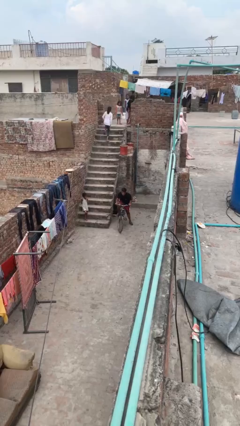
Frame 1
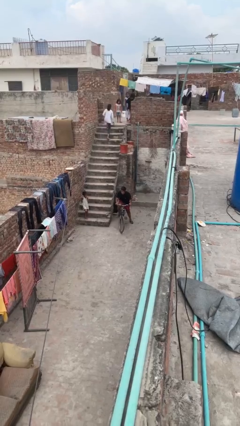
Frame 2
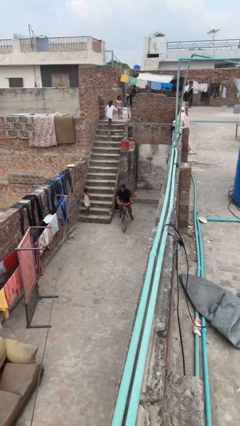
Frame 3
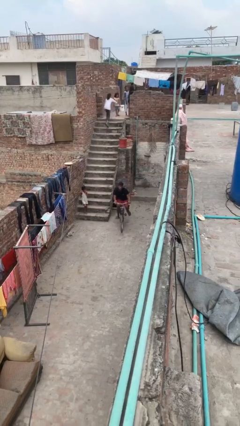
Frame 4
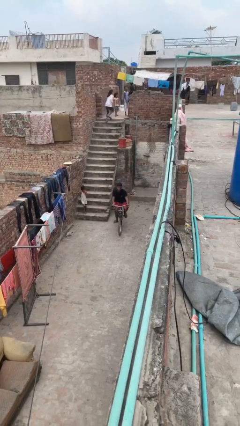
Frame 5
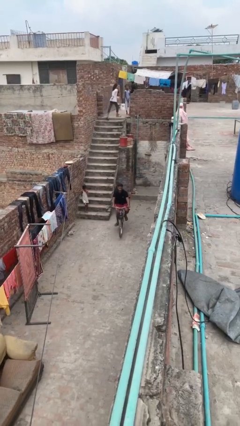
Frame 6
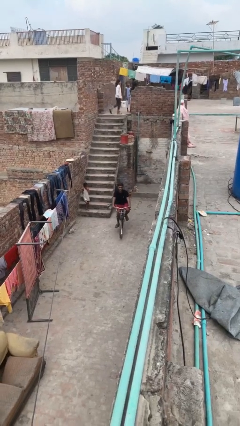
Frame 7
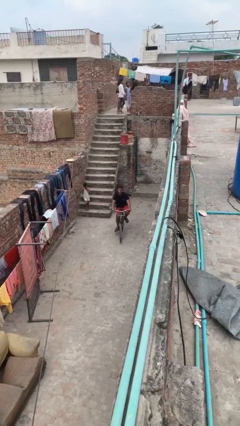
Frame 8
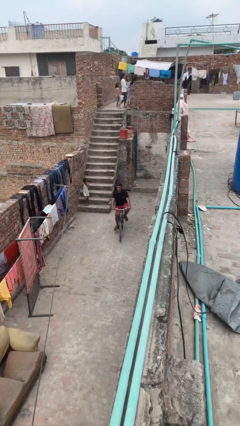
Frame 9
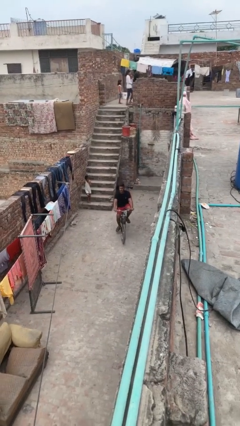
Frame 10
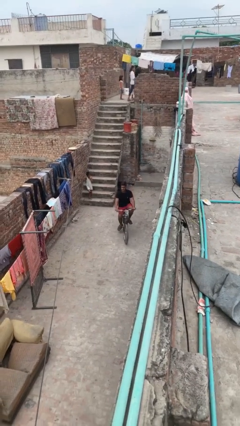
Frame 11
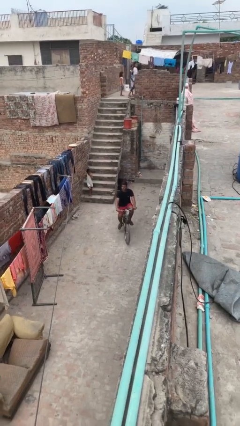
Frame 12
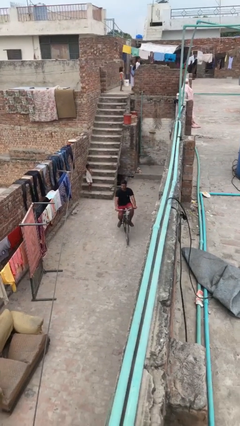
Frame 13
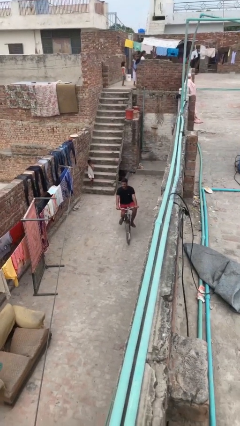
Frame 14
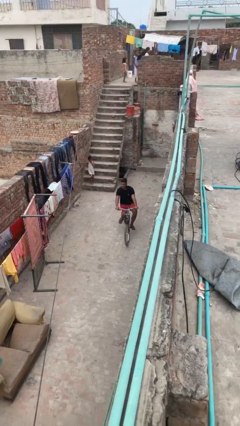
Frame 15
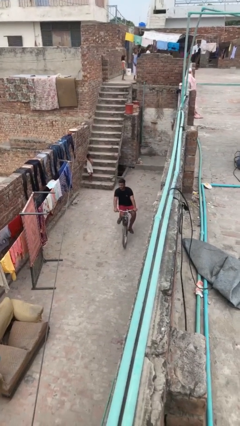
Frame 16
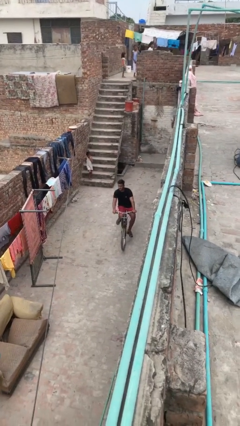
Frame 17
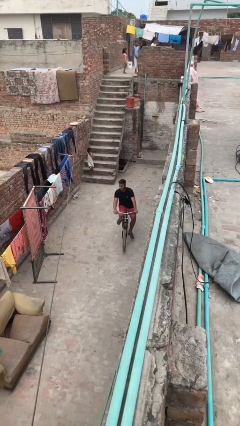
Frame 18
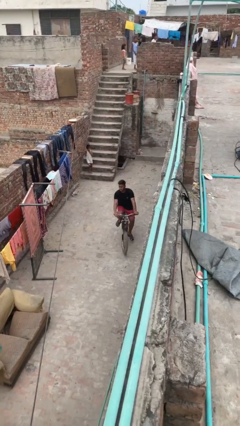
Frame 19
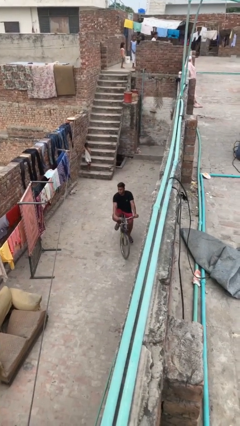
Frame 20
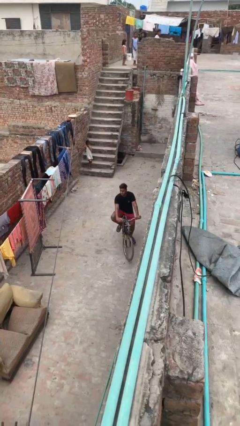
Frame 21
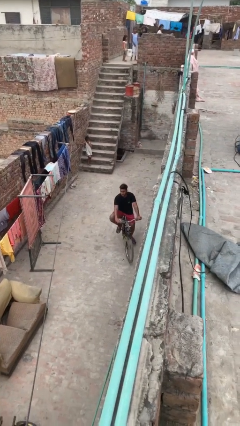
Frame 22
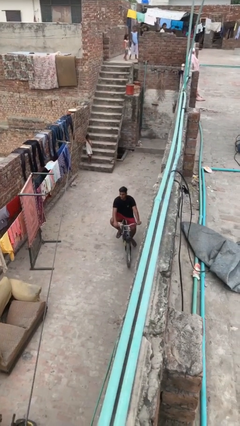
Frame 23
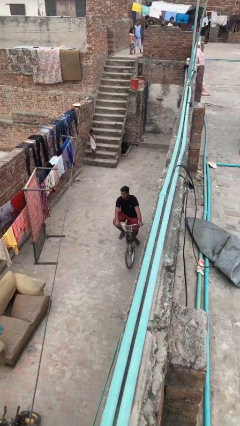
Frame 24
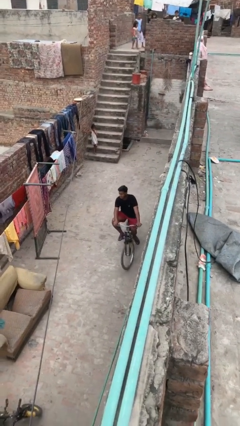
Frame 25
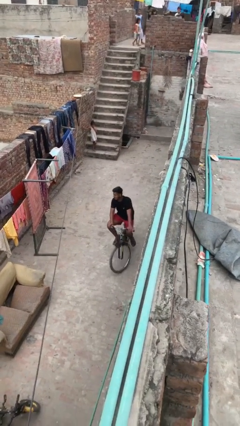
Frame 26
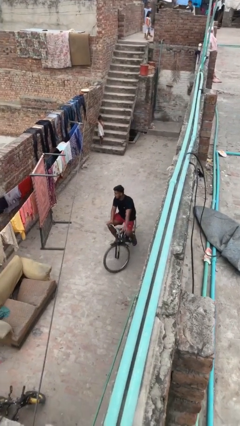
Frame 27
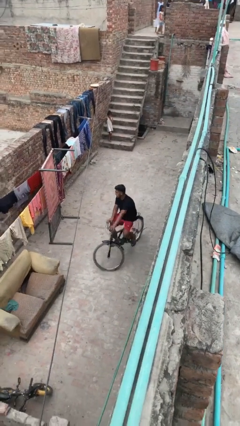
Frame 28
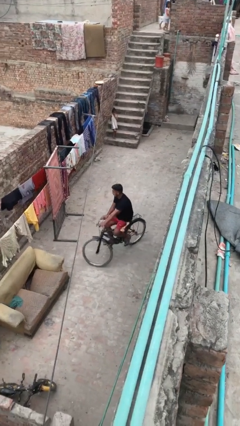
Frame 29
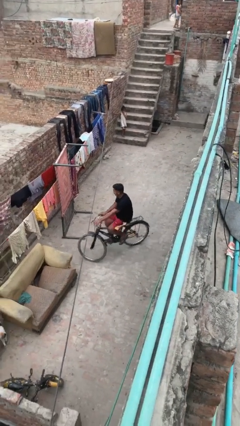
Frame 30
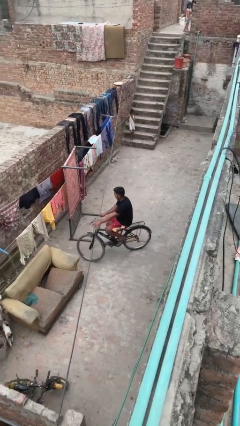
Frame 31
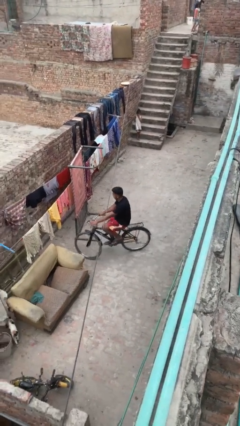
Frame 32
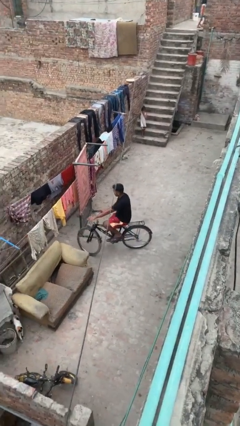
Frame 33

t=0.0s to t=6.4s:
person rides bicycle

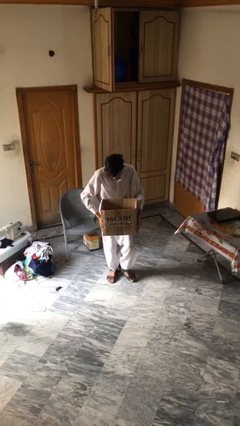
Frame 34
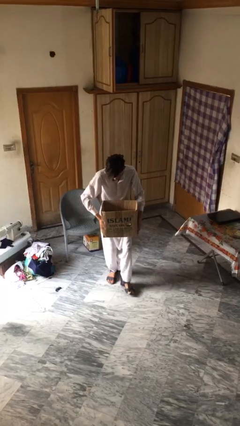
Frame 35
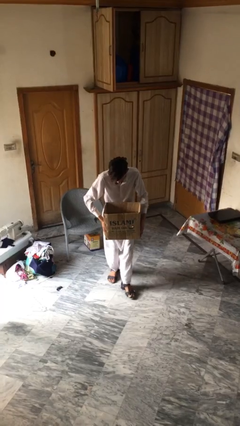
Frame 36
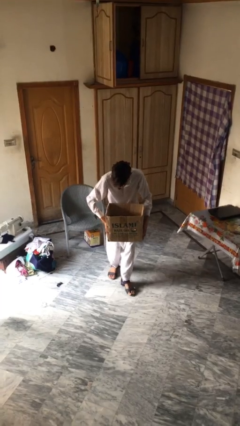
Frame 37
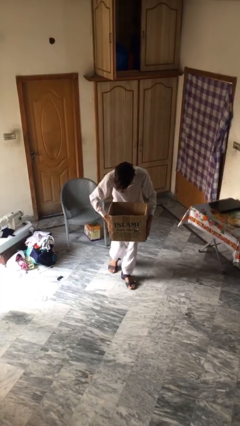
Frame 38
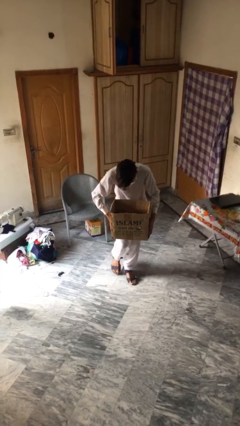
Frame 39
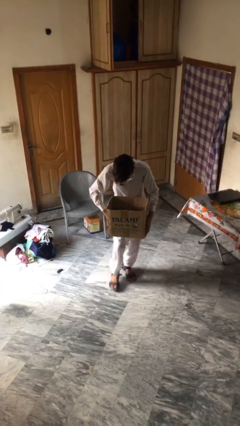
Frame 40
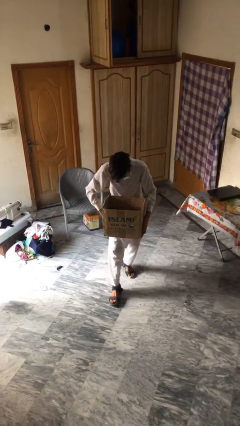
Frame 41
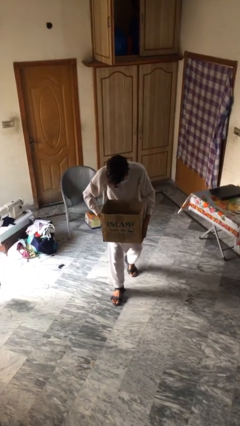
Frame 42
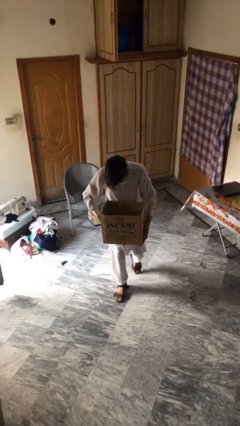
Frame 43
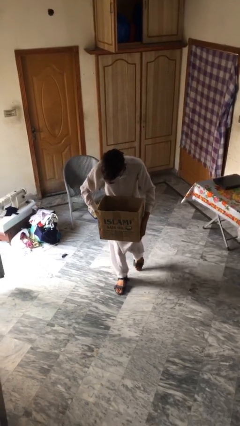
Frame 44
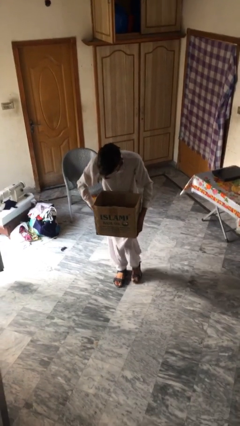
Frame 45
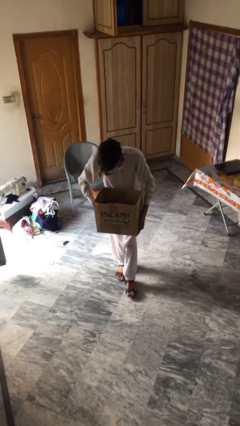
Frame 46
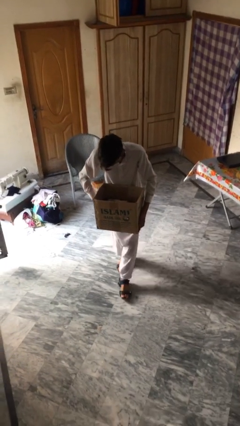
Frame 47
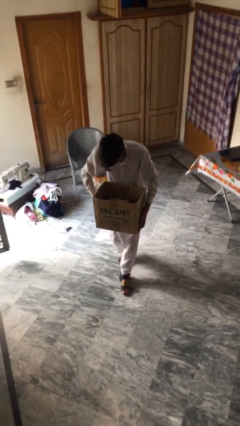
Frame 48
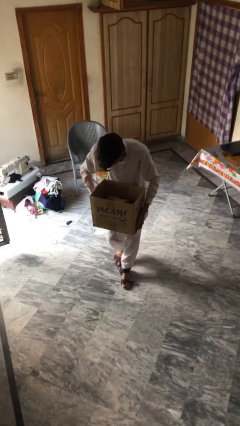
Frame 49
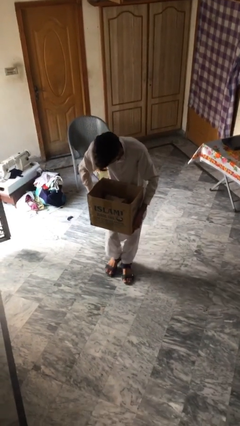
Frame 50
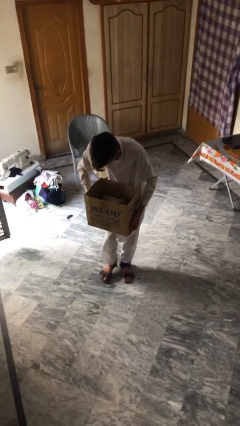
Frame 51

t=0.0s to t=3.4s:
person carries heavy object

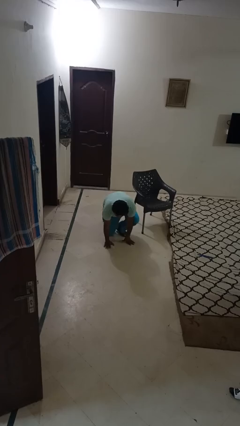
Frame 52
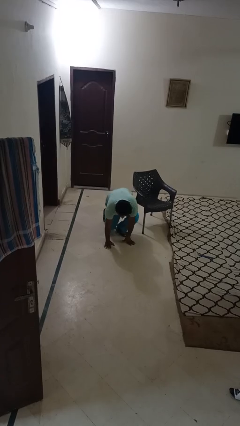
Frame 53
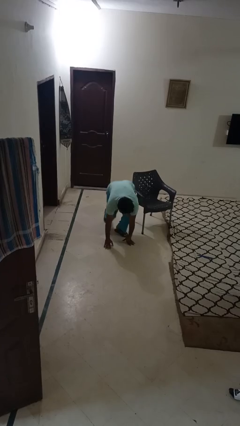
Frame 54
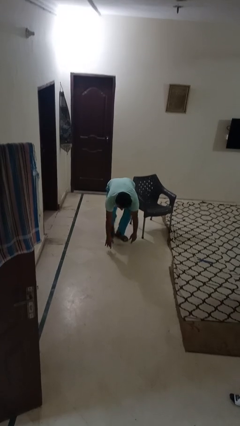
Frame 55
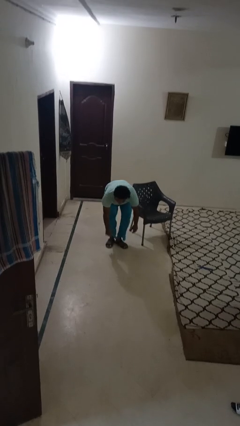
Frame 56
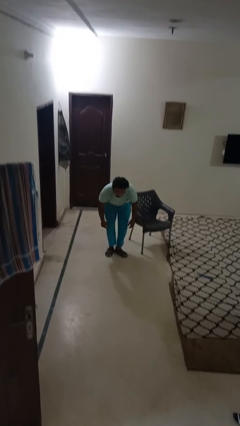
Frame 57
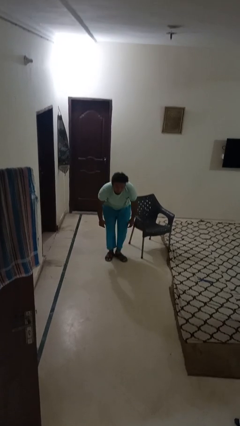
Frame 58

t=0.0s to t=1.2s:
person stands up from floor

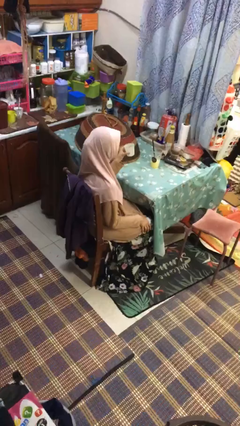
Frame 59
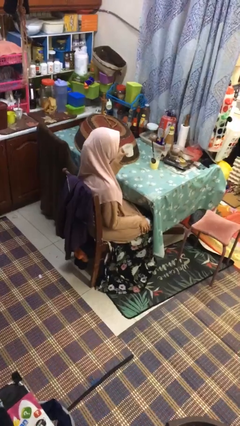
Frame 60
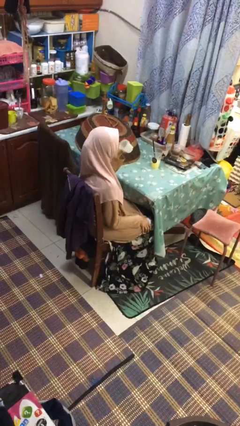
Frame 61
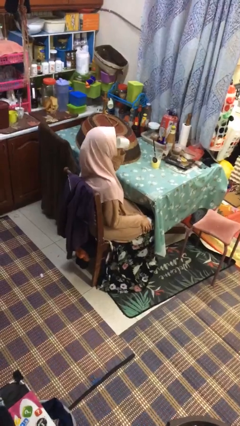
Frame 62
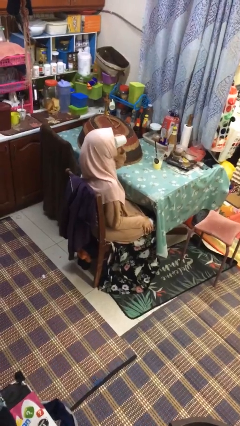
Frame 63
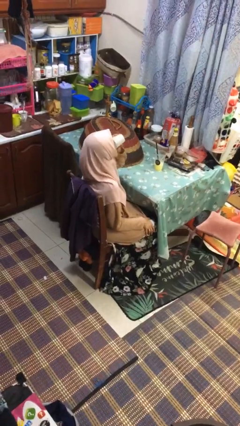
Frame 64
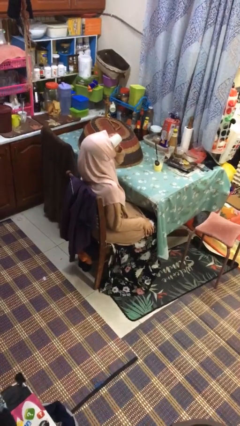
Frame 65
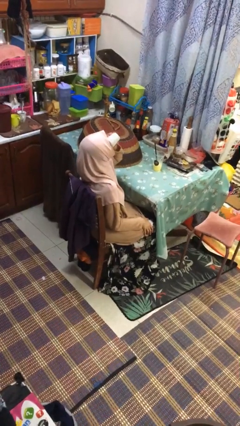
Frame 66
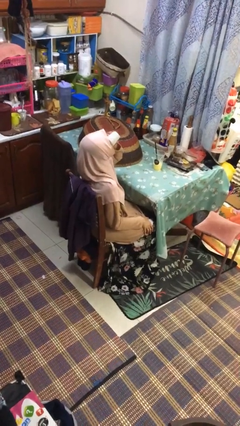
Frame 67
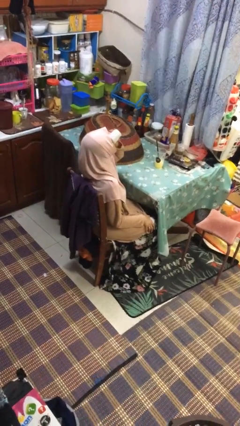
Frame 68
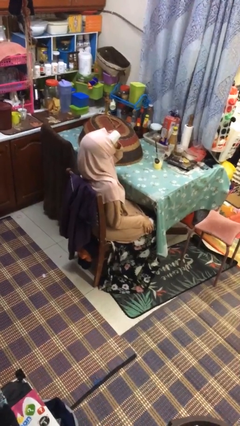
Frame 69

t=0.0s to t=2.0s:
person drinks from shotglass

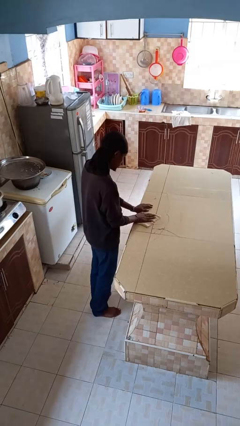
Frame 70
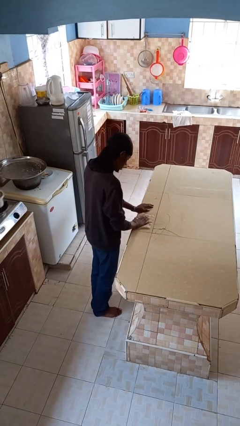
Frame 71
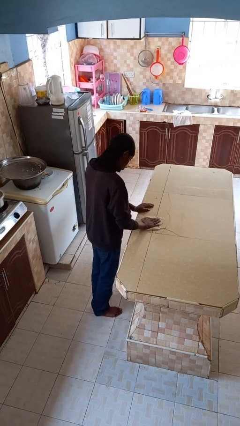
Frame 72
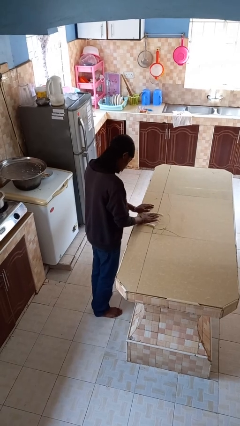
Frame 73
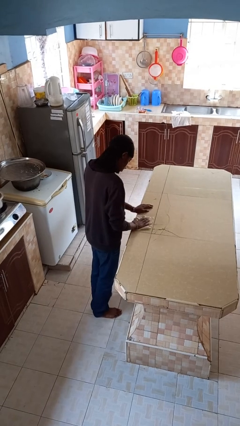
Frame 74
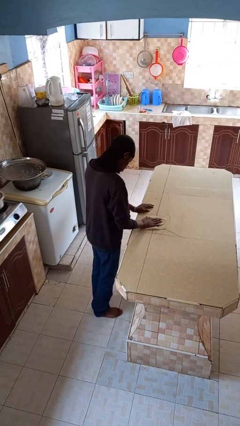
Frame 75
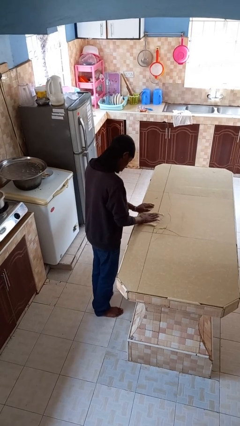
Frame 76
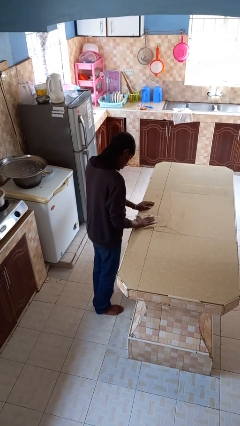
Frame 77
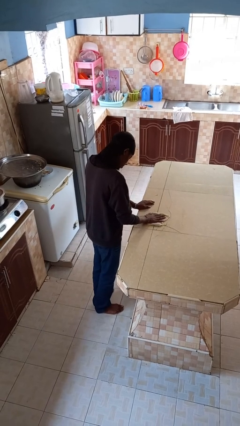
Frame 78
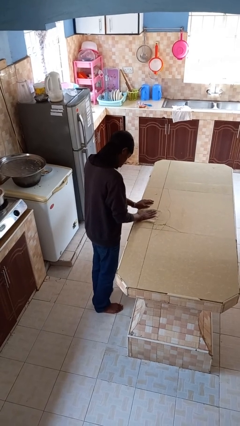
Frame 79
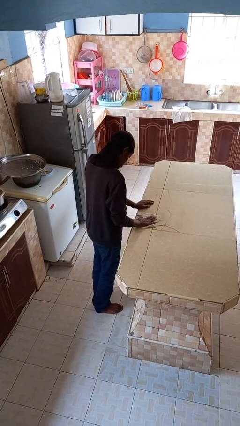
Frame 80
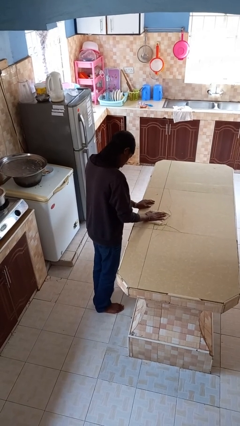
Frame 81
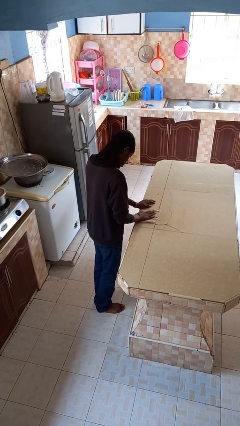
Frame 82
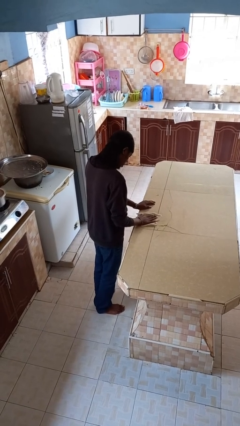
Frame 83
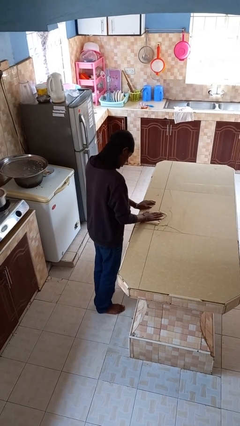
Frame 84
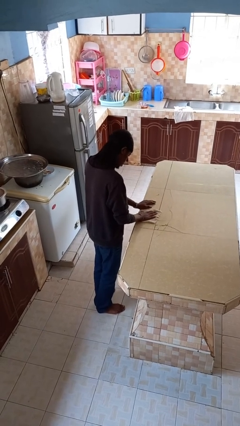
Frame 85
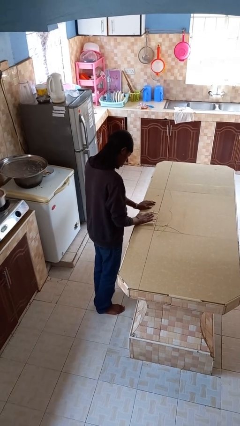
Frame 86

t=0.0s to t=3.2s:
person cleans table with rag

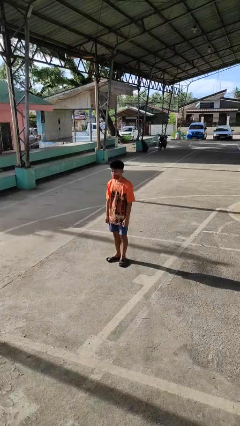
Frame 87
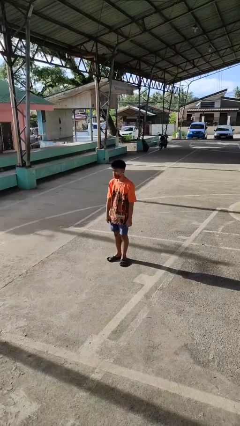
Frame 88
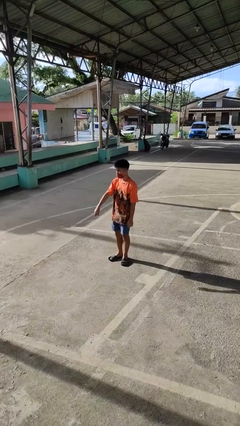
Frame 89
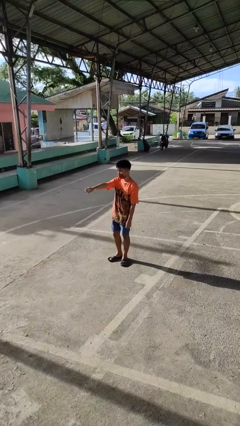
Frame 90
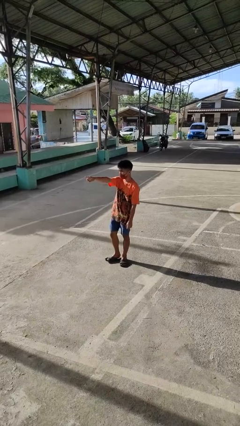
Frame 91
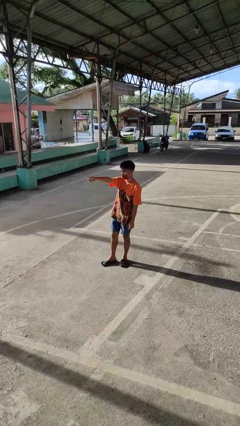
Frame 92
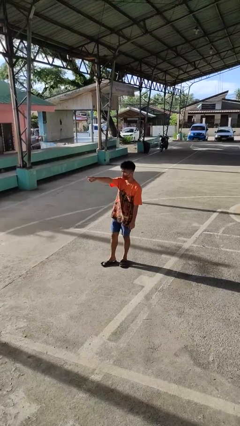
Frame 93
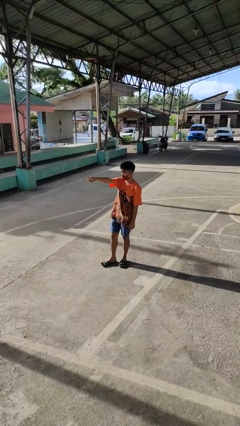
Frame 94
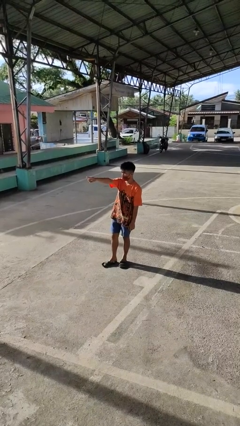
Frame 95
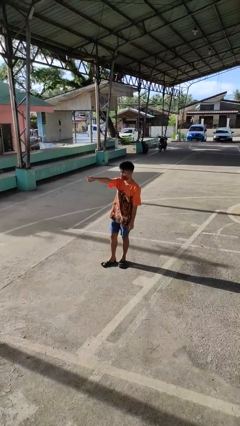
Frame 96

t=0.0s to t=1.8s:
person points at person
